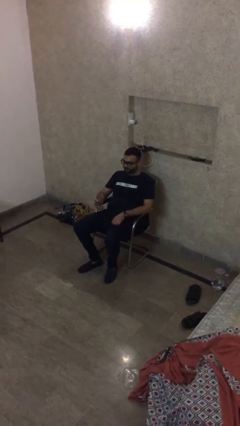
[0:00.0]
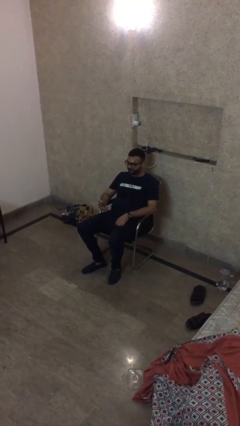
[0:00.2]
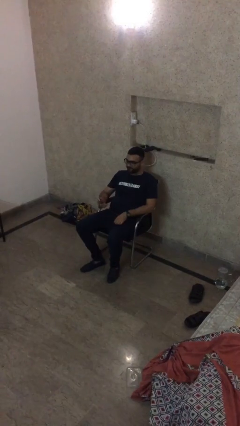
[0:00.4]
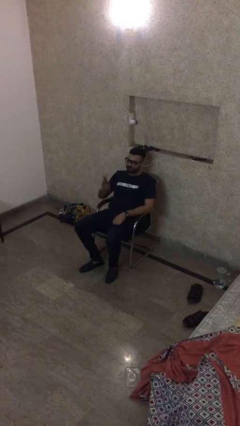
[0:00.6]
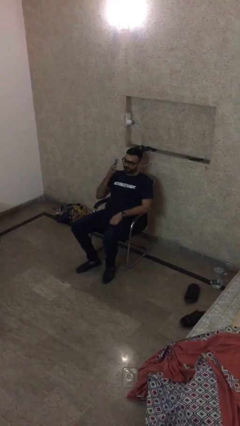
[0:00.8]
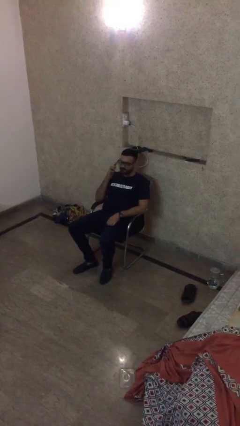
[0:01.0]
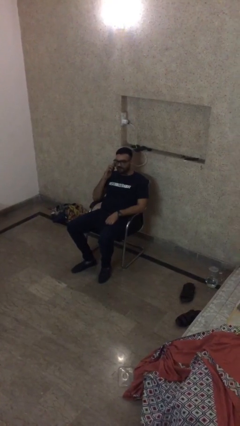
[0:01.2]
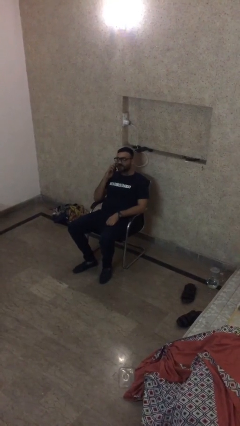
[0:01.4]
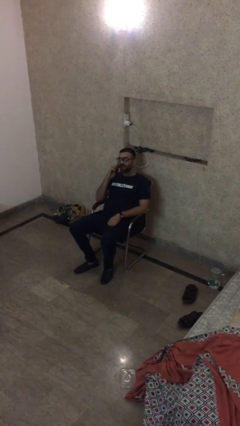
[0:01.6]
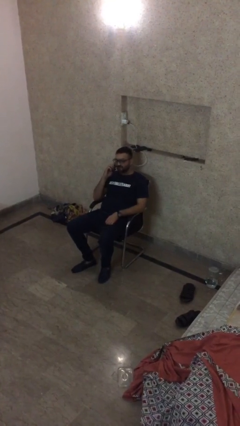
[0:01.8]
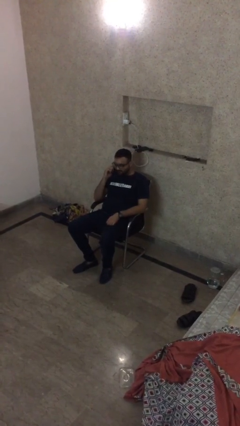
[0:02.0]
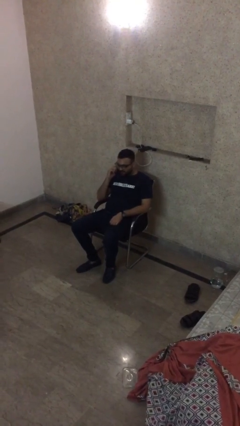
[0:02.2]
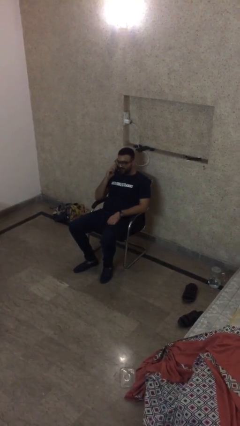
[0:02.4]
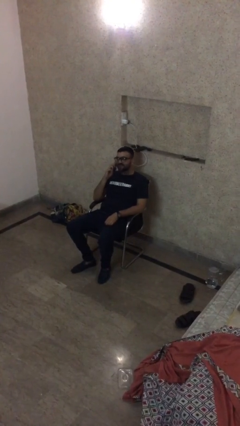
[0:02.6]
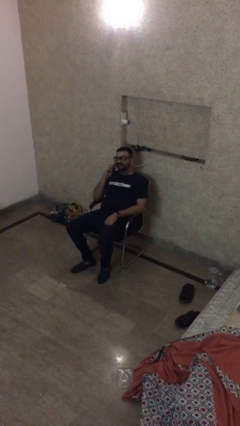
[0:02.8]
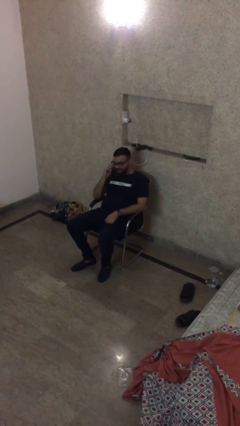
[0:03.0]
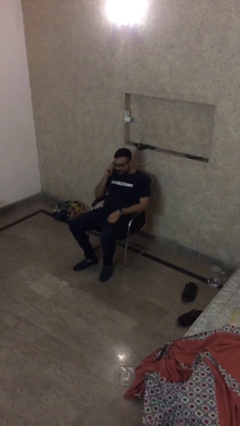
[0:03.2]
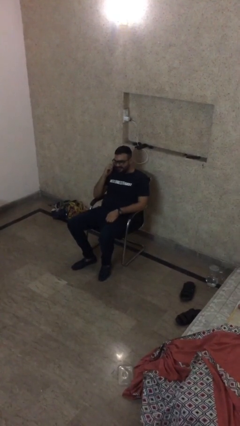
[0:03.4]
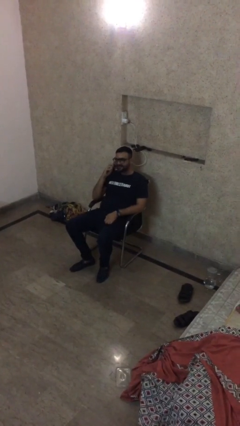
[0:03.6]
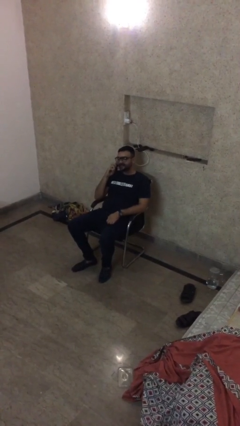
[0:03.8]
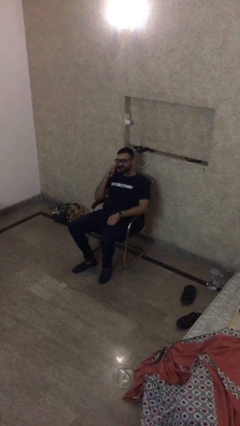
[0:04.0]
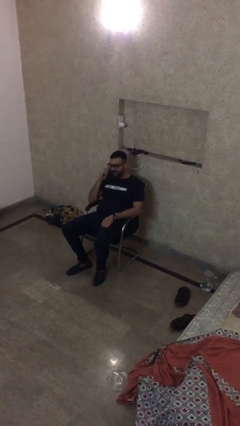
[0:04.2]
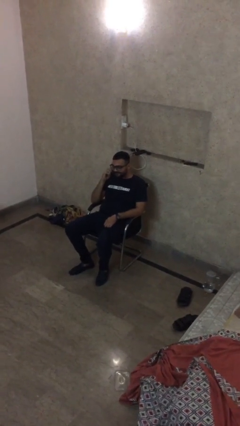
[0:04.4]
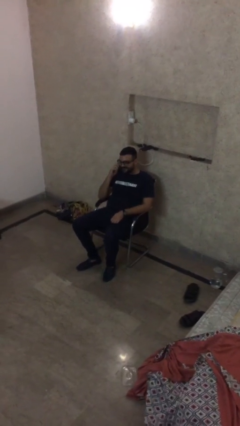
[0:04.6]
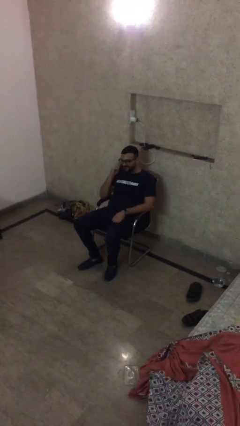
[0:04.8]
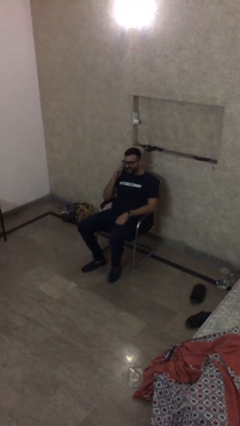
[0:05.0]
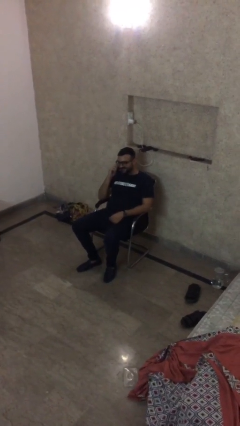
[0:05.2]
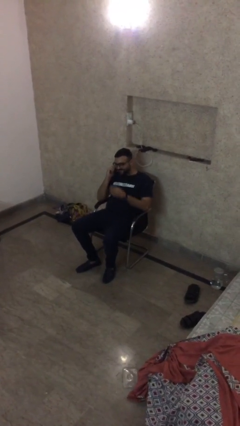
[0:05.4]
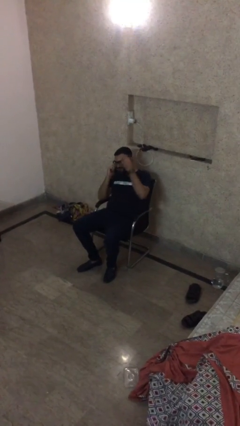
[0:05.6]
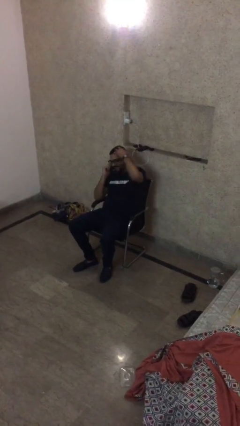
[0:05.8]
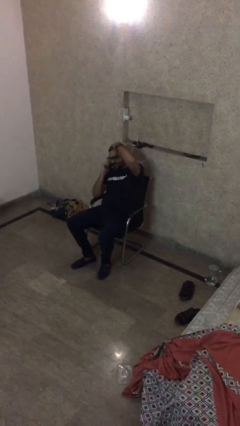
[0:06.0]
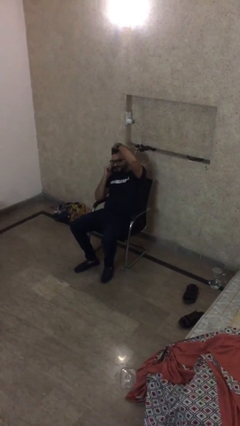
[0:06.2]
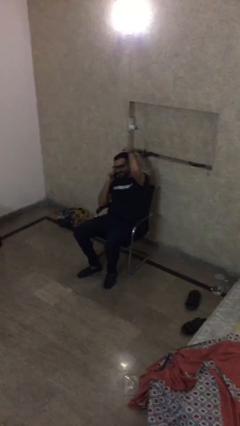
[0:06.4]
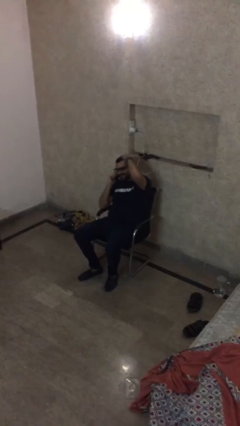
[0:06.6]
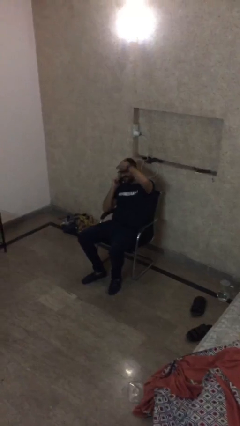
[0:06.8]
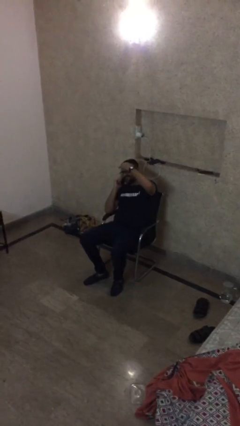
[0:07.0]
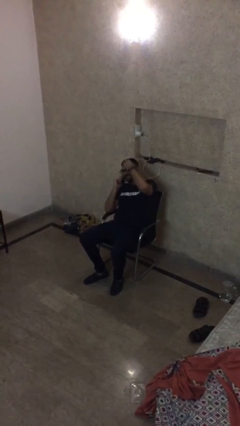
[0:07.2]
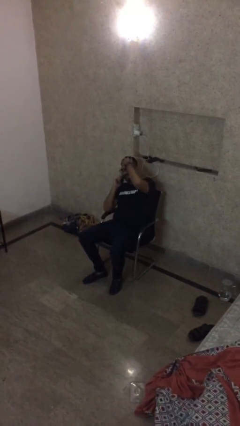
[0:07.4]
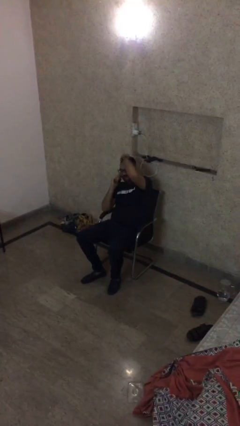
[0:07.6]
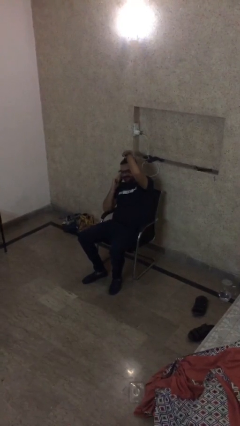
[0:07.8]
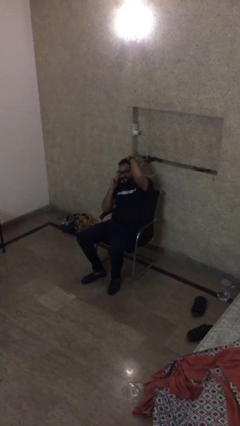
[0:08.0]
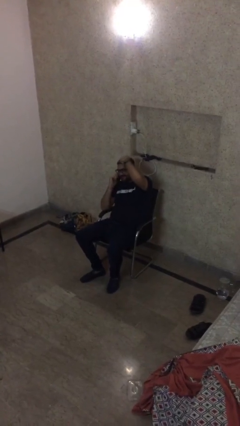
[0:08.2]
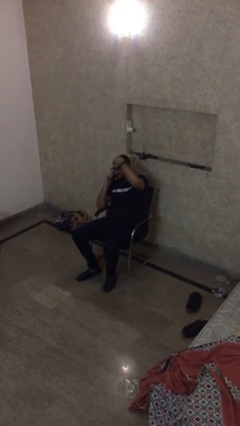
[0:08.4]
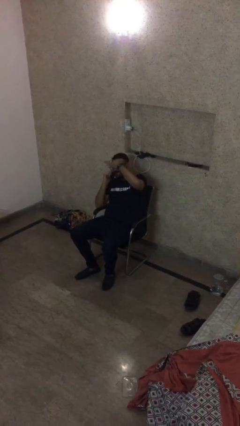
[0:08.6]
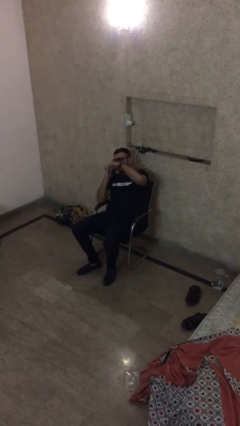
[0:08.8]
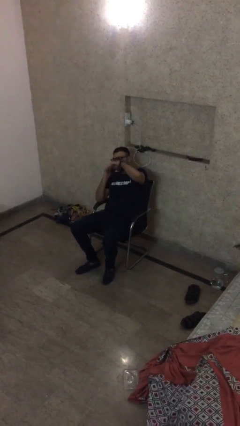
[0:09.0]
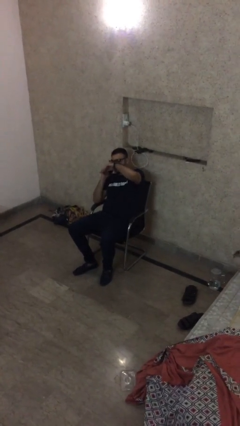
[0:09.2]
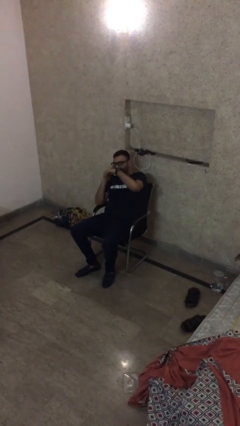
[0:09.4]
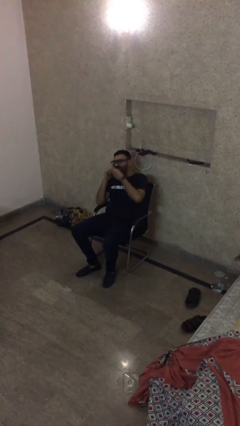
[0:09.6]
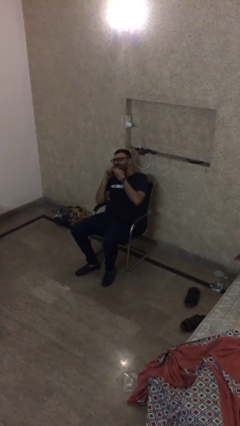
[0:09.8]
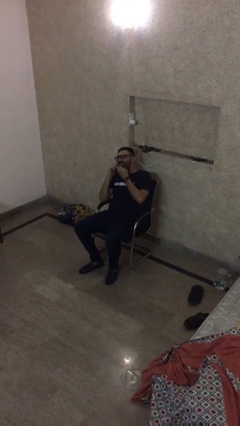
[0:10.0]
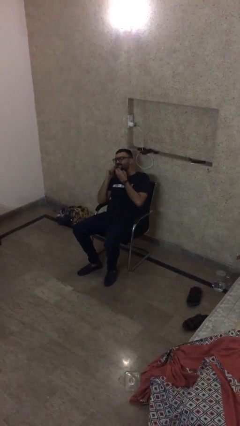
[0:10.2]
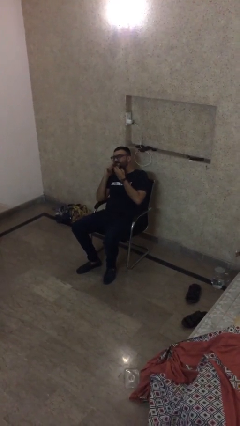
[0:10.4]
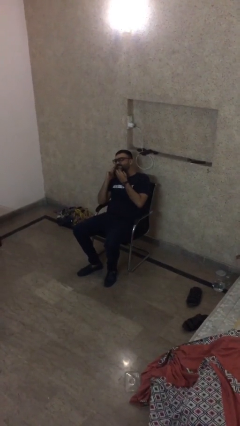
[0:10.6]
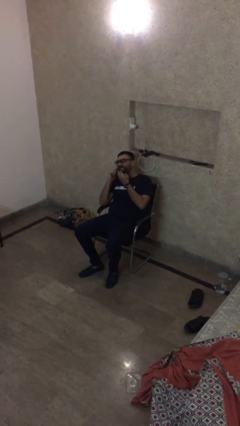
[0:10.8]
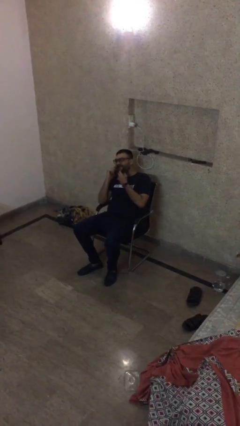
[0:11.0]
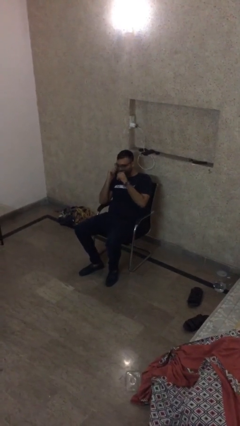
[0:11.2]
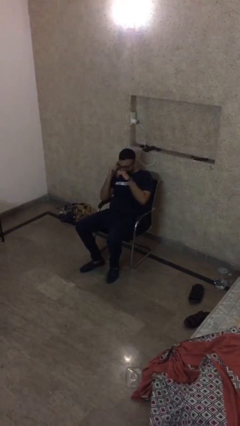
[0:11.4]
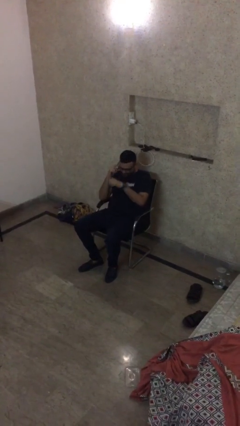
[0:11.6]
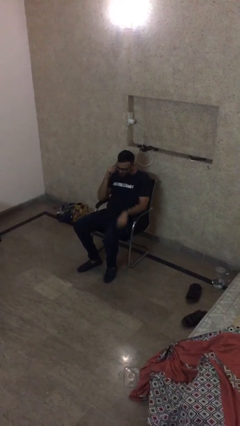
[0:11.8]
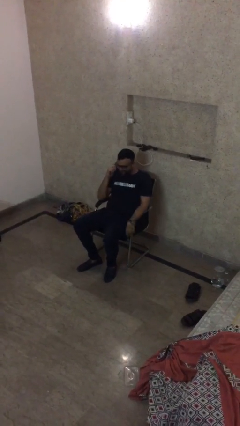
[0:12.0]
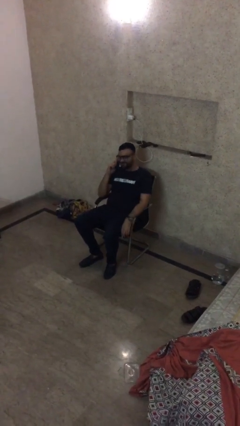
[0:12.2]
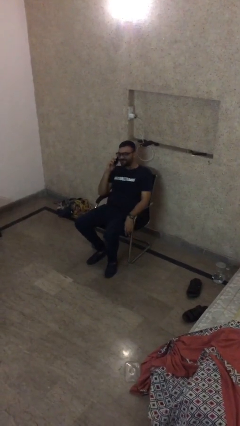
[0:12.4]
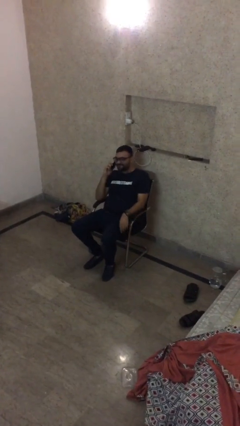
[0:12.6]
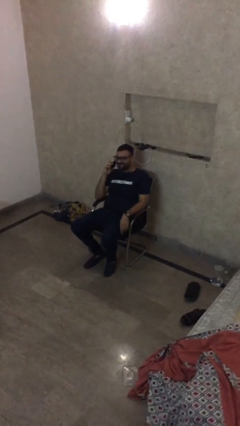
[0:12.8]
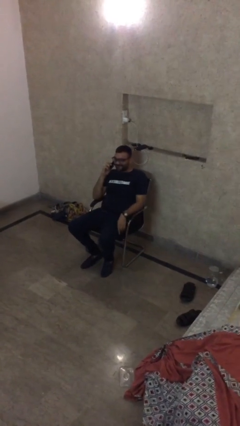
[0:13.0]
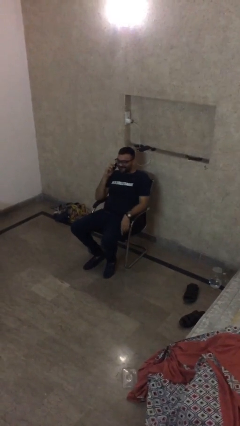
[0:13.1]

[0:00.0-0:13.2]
person talks on phone

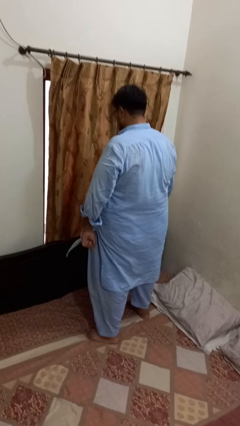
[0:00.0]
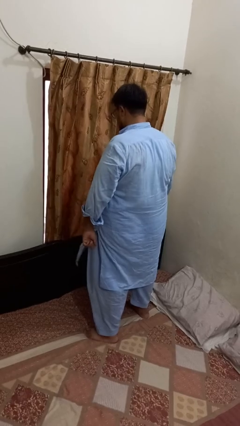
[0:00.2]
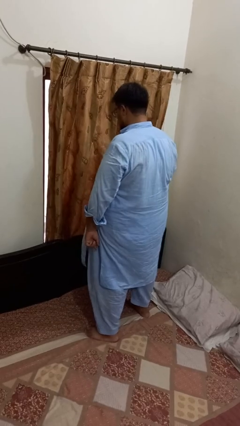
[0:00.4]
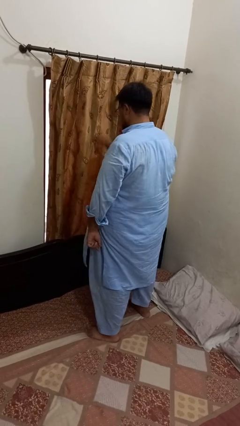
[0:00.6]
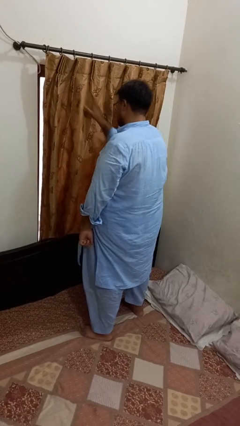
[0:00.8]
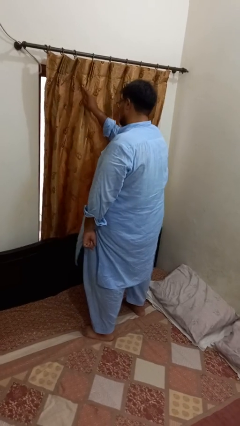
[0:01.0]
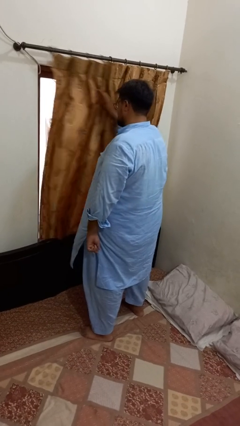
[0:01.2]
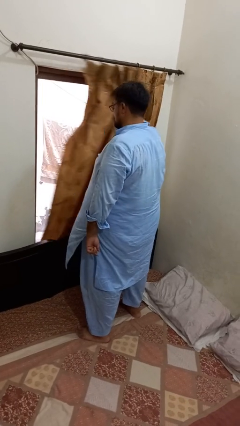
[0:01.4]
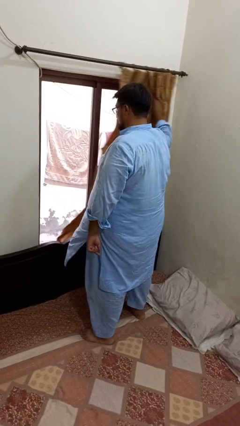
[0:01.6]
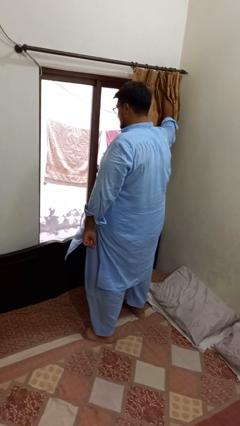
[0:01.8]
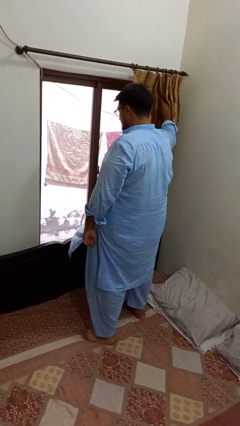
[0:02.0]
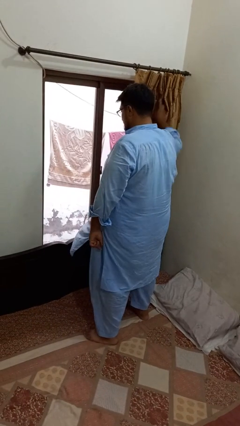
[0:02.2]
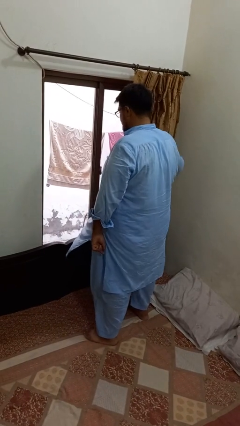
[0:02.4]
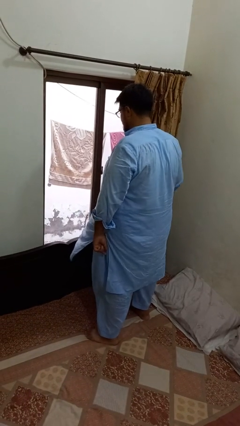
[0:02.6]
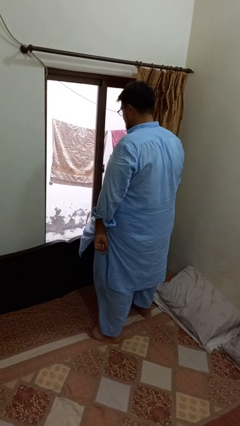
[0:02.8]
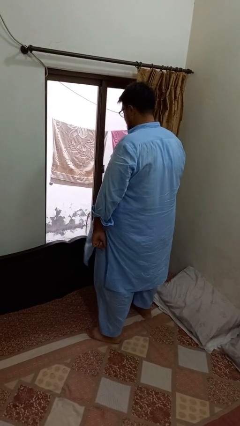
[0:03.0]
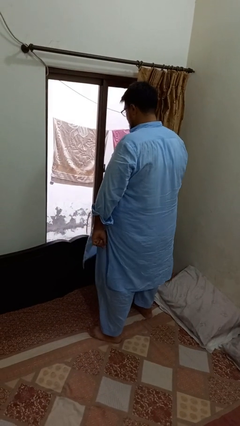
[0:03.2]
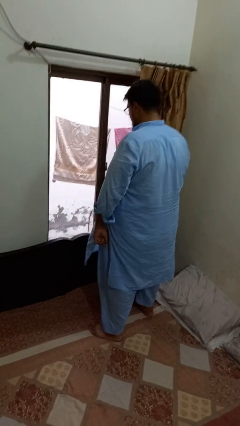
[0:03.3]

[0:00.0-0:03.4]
person opens curtains

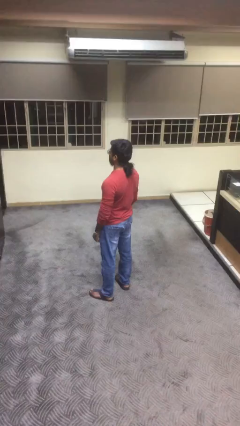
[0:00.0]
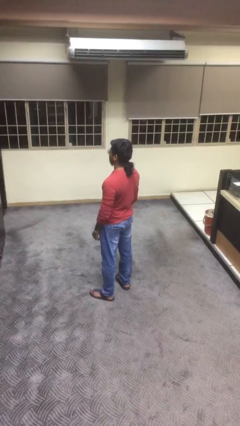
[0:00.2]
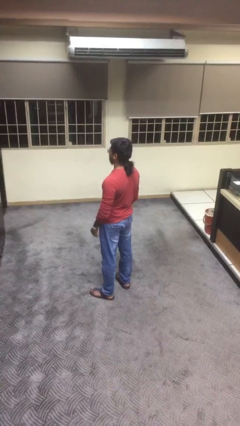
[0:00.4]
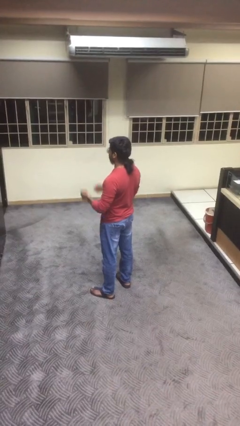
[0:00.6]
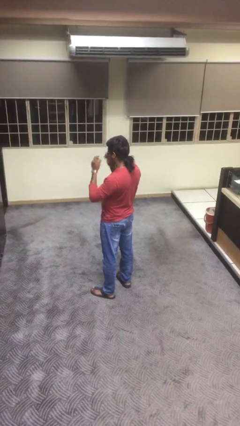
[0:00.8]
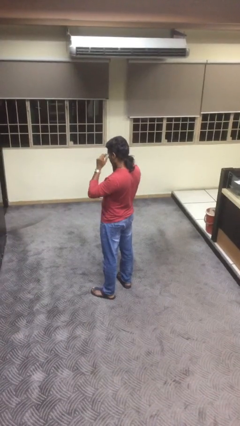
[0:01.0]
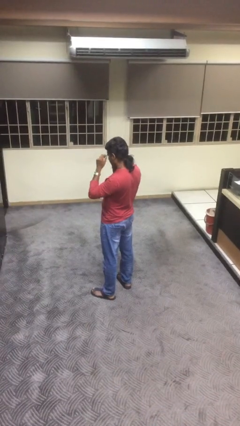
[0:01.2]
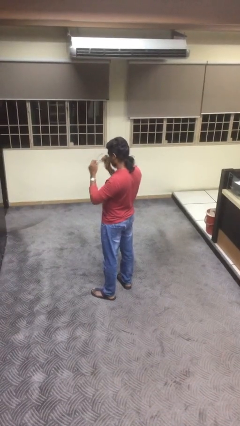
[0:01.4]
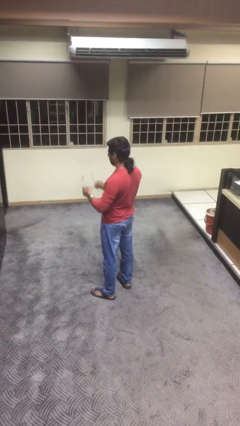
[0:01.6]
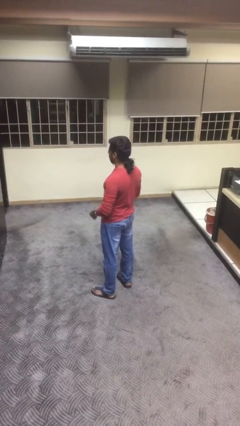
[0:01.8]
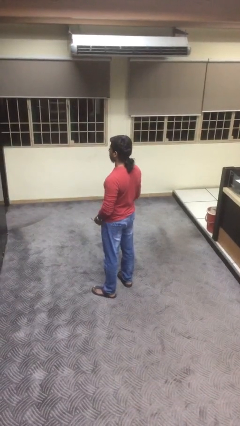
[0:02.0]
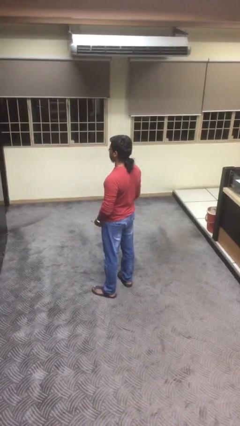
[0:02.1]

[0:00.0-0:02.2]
person takes off glasses
